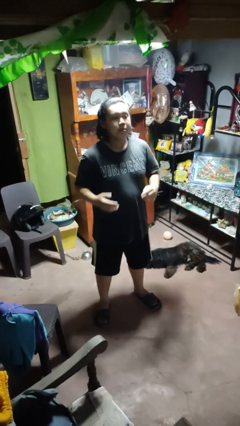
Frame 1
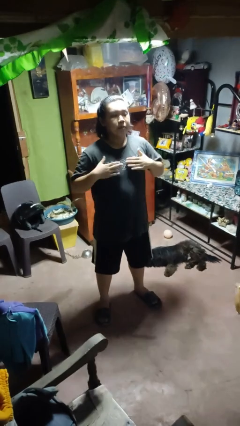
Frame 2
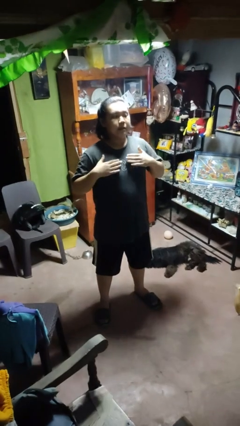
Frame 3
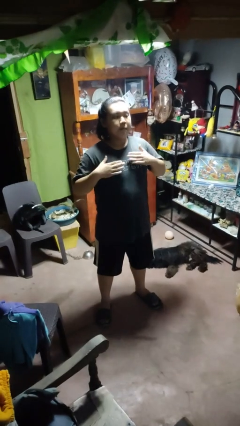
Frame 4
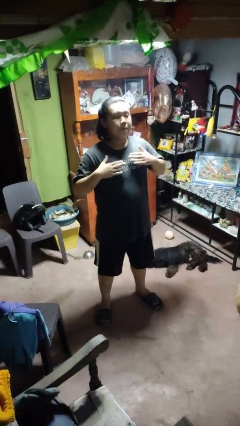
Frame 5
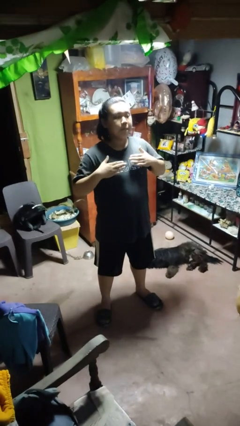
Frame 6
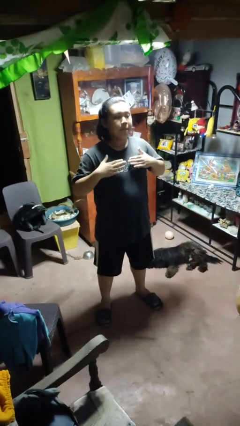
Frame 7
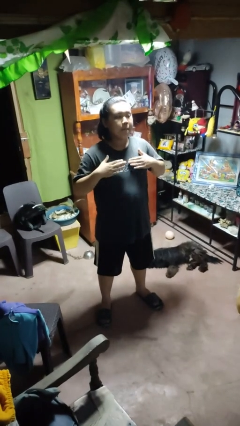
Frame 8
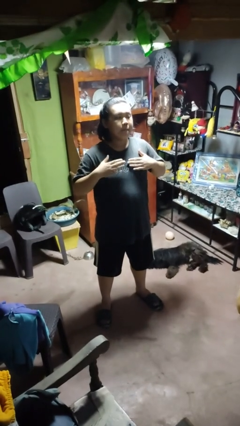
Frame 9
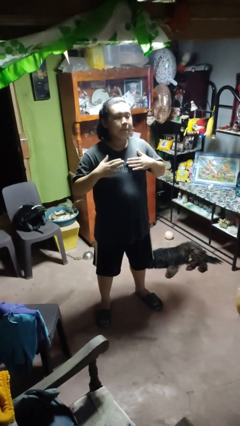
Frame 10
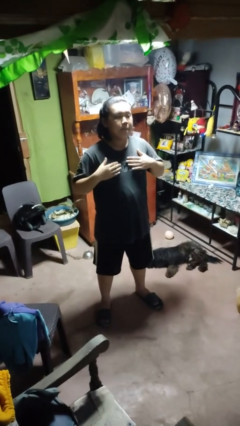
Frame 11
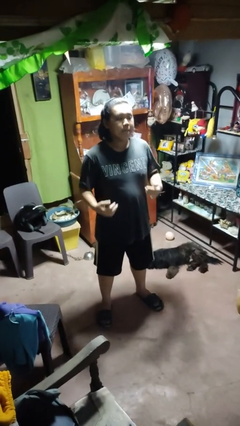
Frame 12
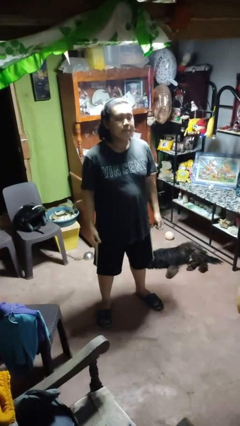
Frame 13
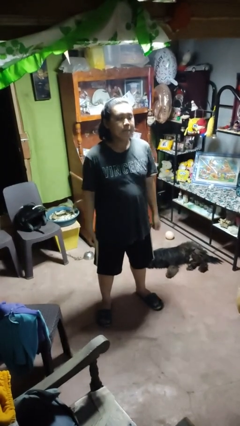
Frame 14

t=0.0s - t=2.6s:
person drums on chest

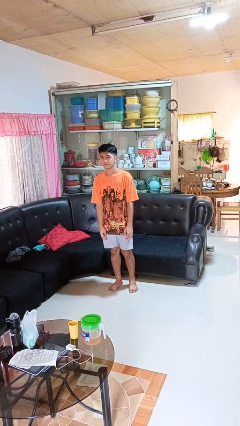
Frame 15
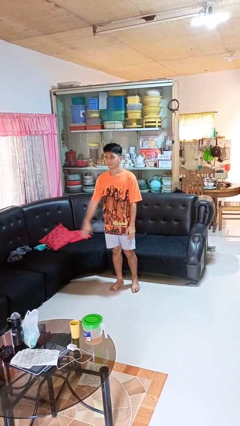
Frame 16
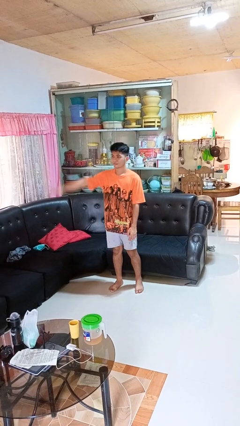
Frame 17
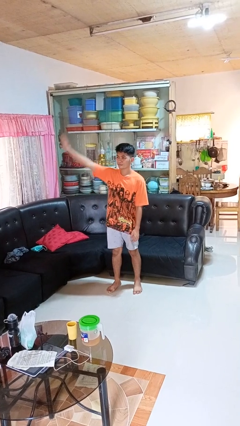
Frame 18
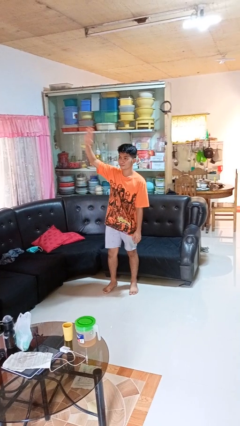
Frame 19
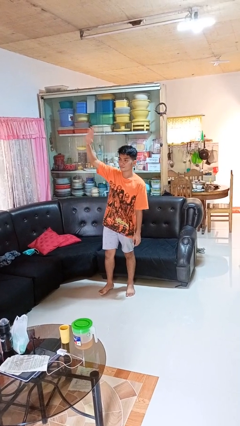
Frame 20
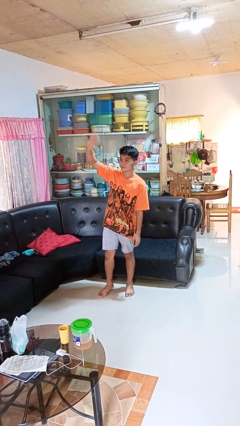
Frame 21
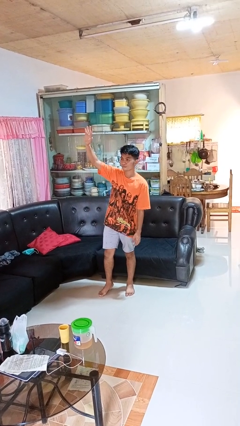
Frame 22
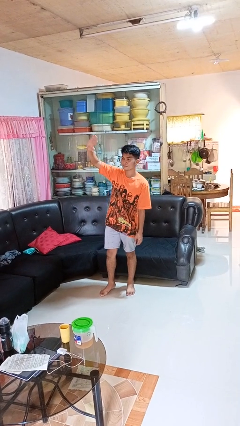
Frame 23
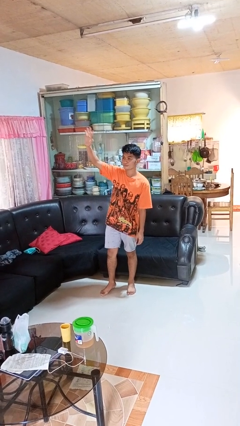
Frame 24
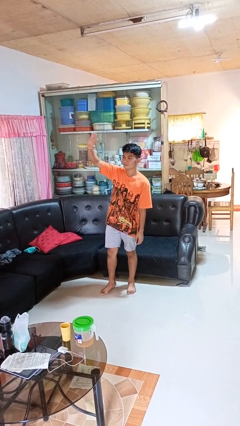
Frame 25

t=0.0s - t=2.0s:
person waves at person

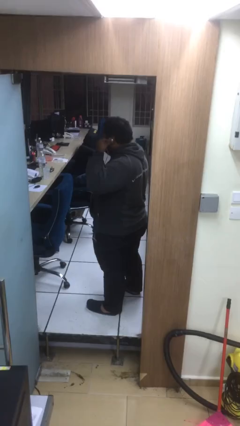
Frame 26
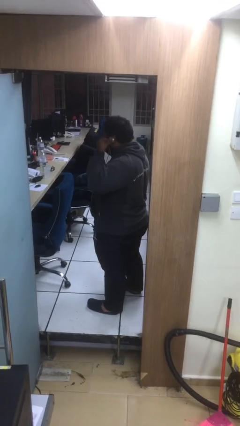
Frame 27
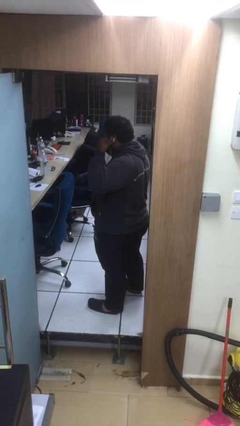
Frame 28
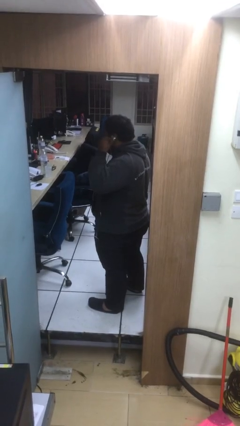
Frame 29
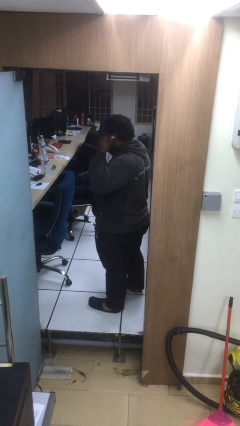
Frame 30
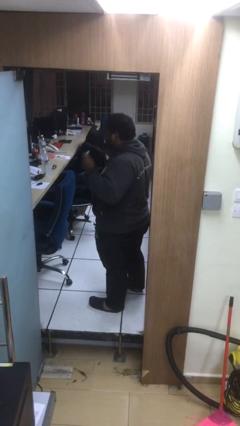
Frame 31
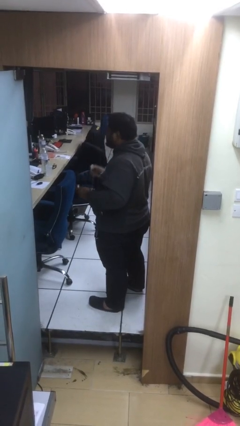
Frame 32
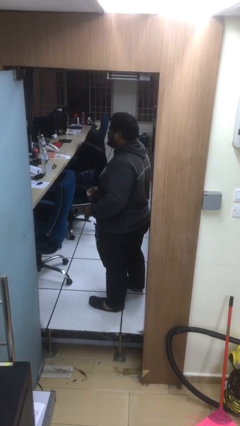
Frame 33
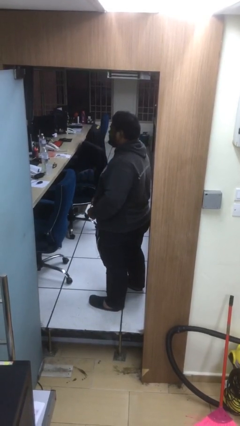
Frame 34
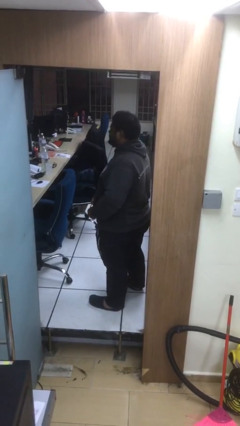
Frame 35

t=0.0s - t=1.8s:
person takes off headphones

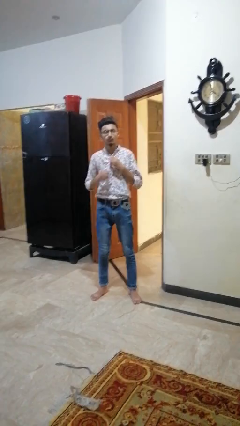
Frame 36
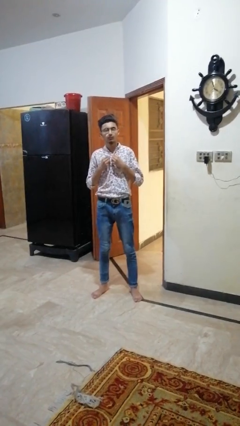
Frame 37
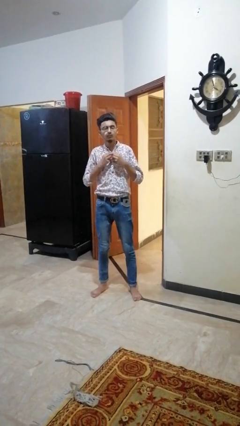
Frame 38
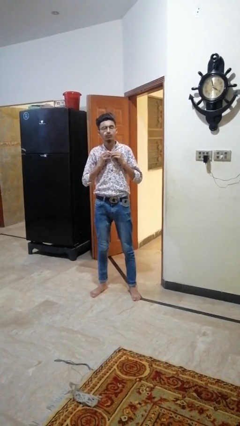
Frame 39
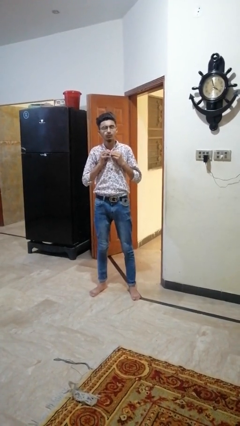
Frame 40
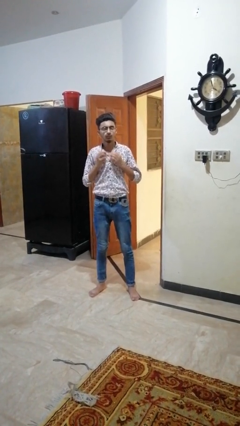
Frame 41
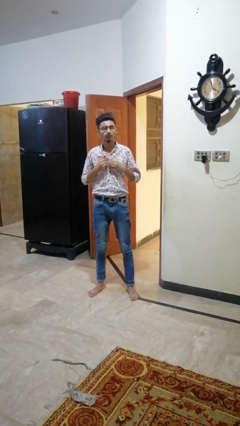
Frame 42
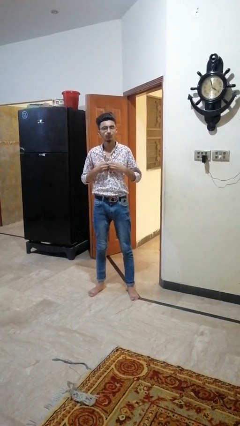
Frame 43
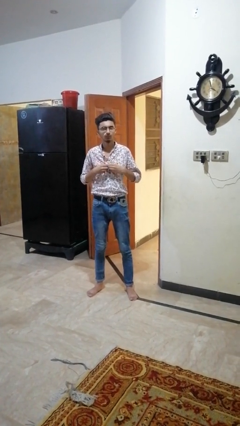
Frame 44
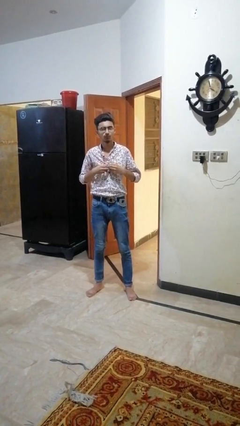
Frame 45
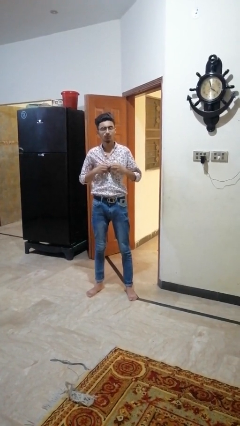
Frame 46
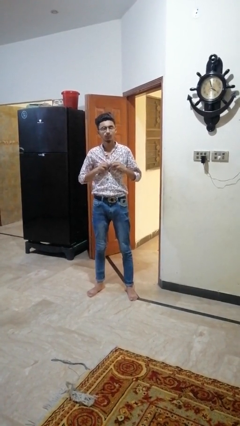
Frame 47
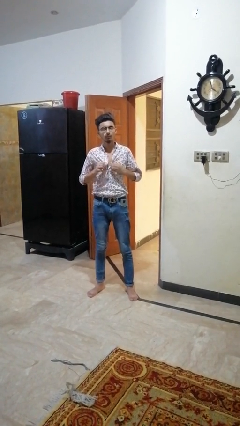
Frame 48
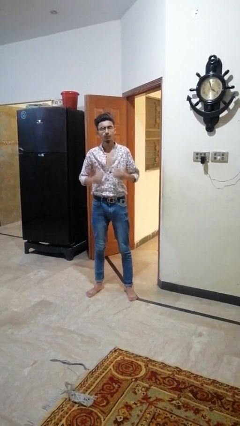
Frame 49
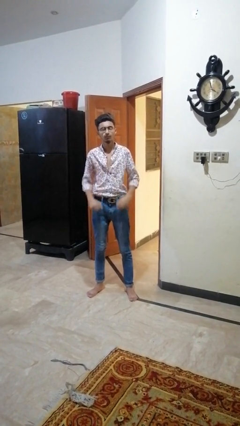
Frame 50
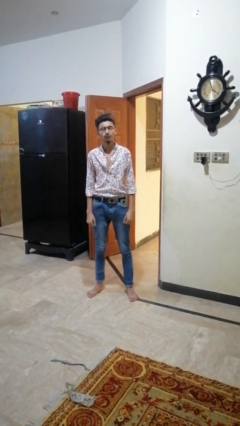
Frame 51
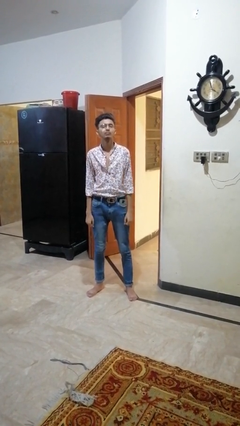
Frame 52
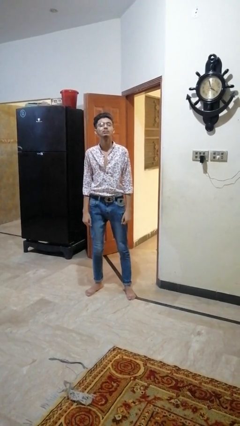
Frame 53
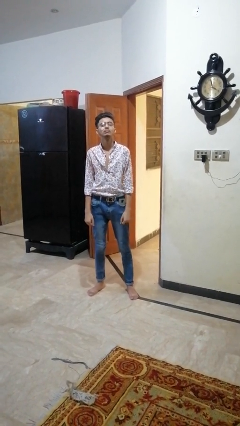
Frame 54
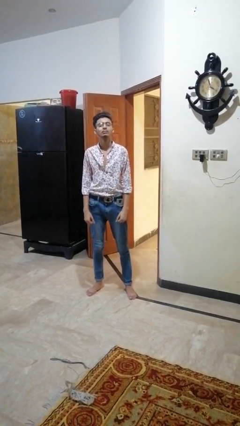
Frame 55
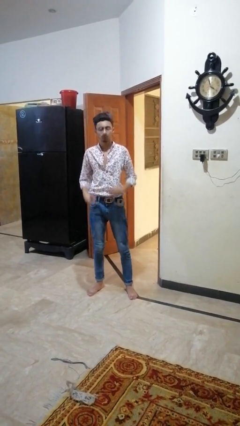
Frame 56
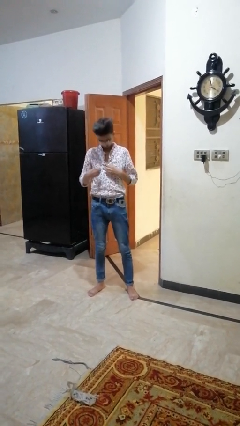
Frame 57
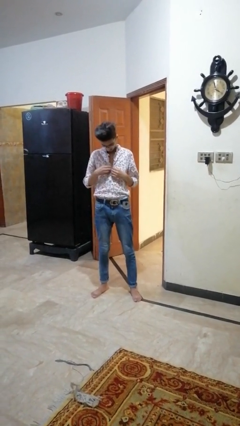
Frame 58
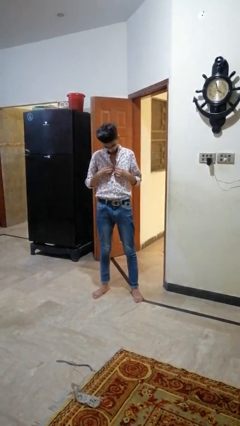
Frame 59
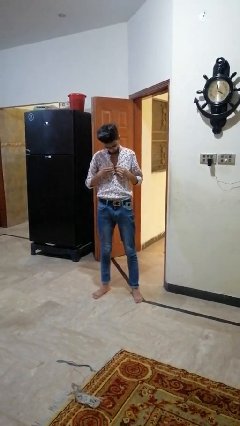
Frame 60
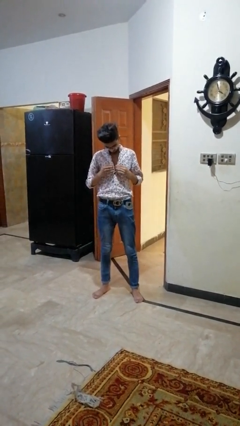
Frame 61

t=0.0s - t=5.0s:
person unbuttons shirt

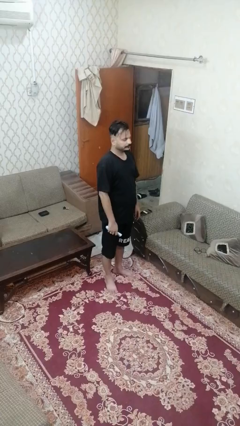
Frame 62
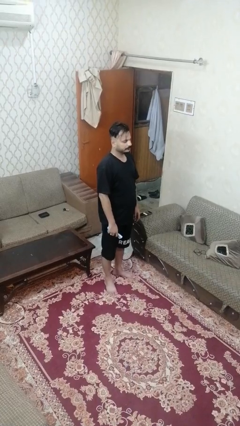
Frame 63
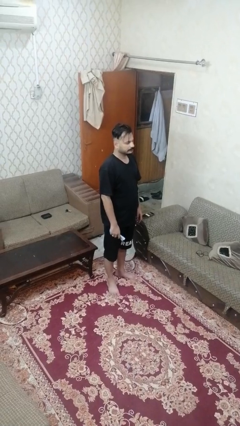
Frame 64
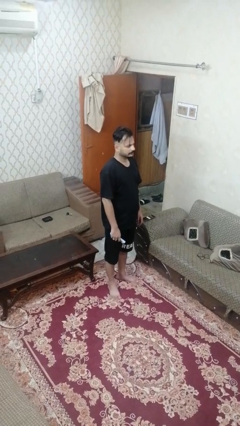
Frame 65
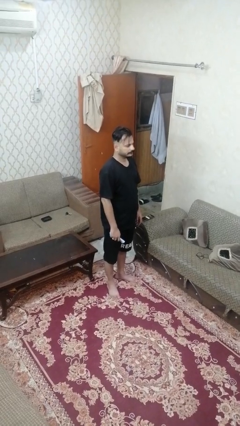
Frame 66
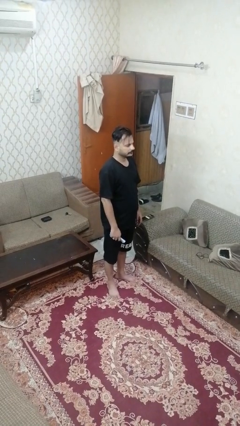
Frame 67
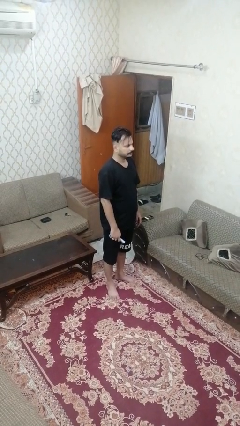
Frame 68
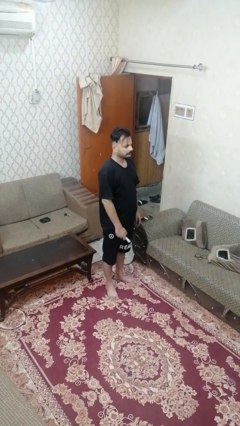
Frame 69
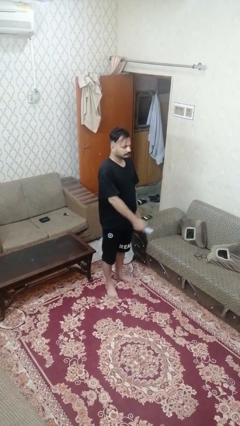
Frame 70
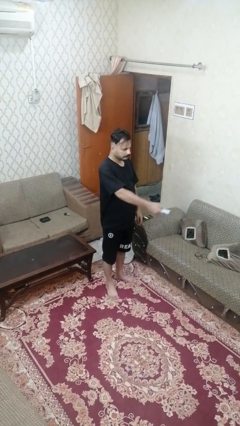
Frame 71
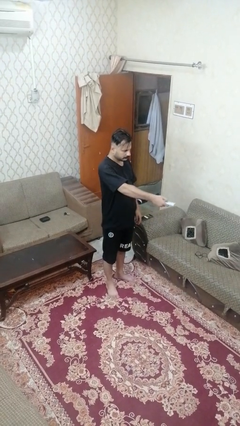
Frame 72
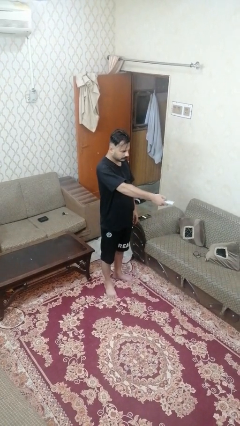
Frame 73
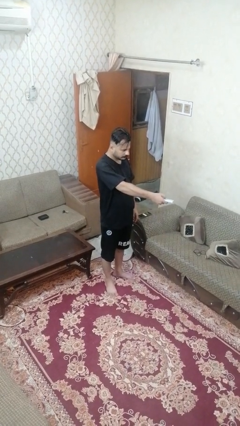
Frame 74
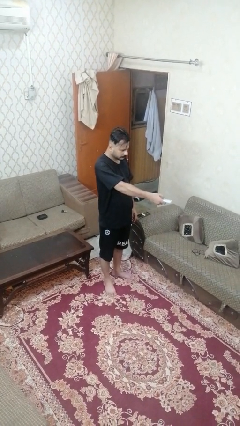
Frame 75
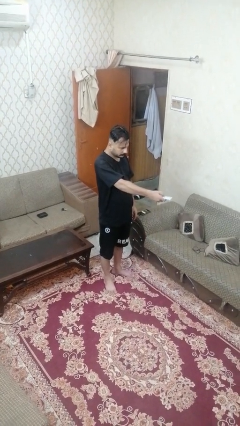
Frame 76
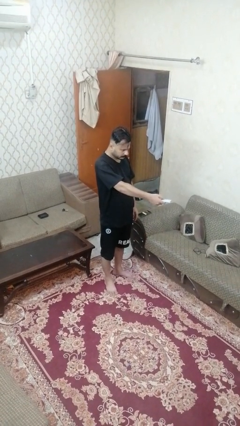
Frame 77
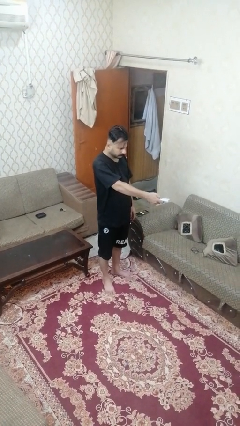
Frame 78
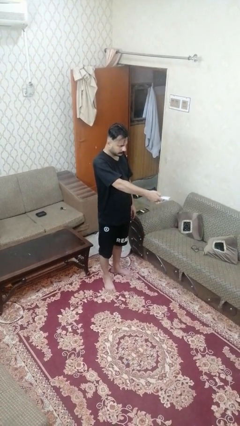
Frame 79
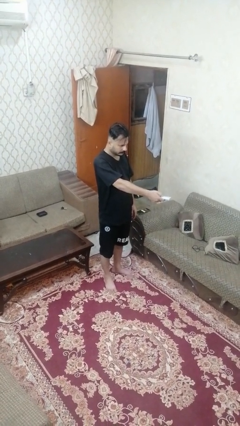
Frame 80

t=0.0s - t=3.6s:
person uses television remote

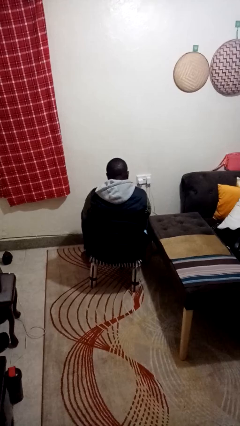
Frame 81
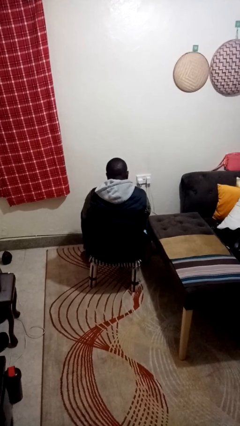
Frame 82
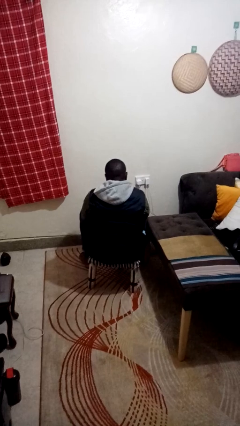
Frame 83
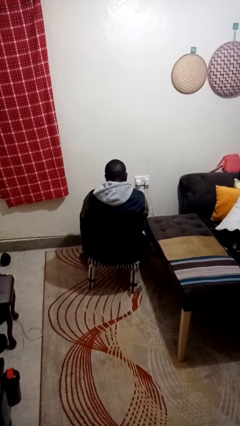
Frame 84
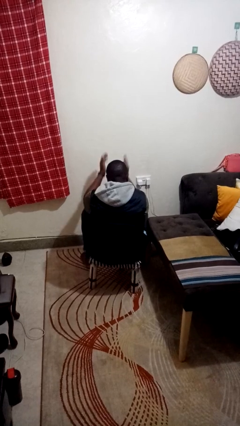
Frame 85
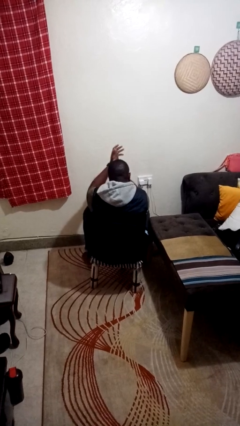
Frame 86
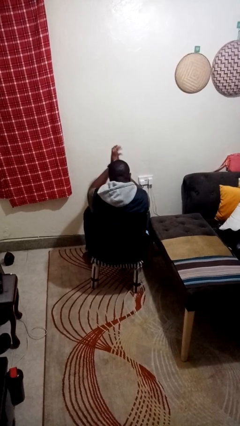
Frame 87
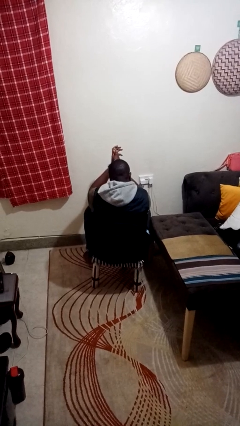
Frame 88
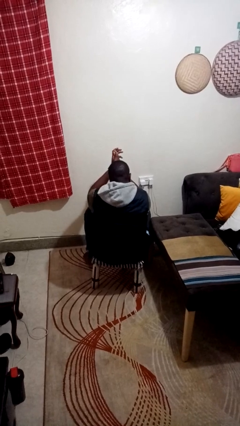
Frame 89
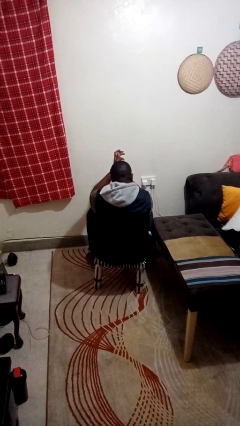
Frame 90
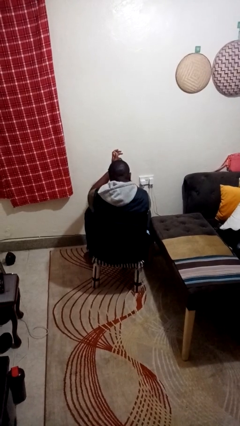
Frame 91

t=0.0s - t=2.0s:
person claps hands

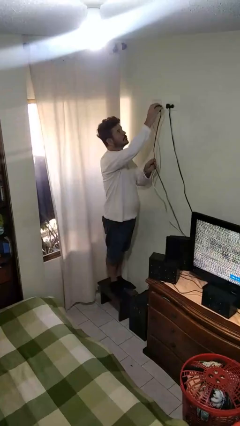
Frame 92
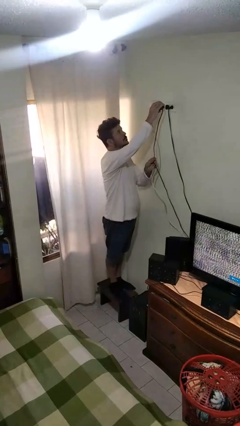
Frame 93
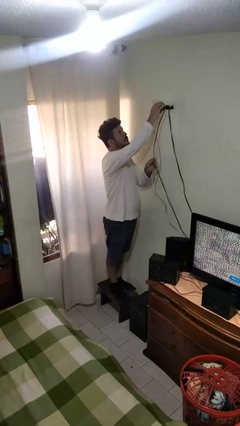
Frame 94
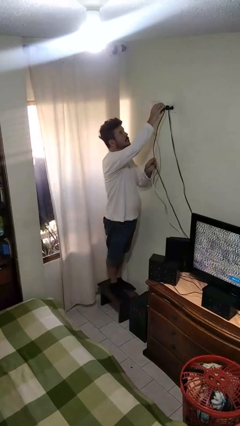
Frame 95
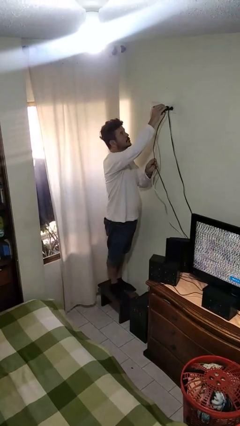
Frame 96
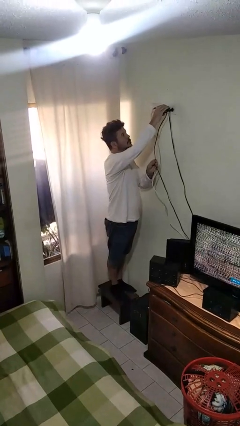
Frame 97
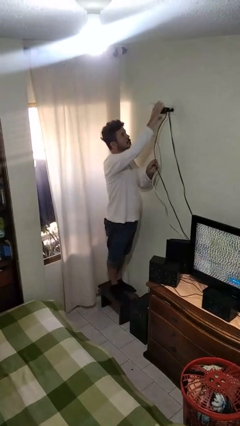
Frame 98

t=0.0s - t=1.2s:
person plugs into electrical socket
